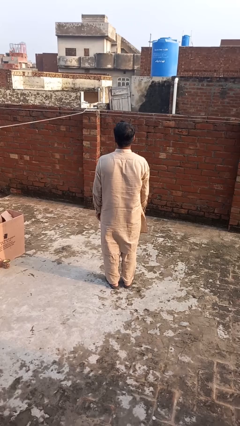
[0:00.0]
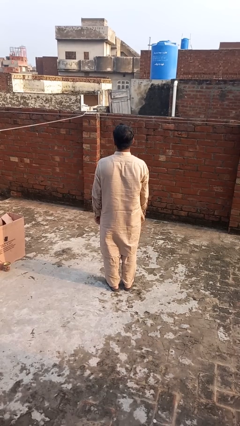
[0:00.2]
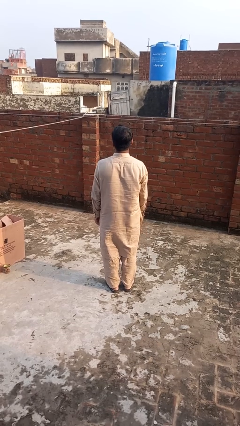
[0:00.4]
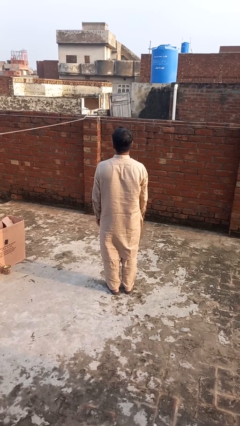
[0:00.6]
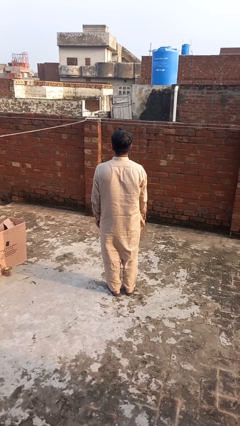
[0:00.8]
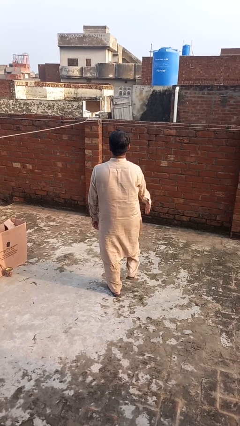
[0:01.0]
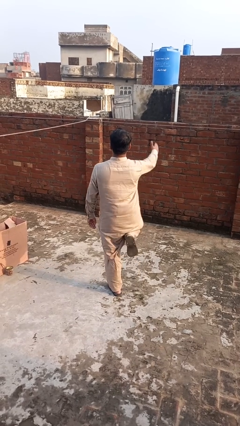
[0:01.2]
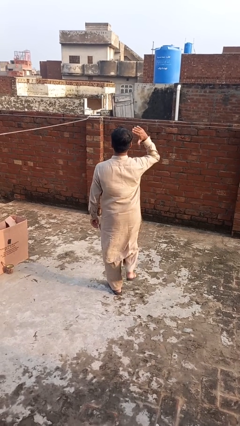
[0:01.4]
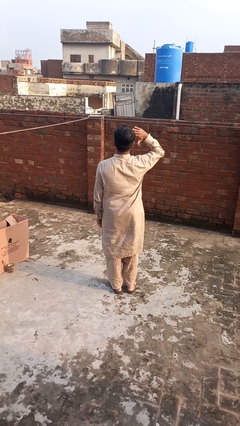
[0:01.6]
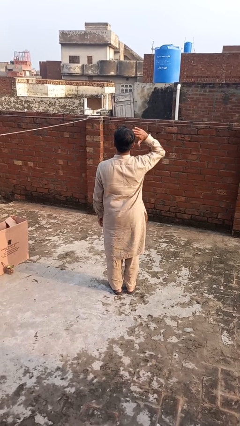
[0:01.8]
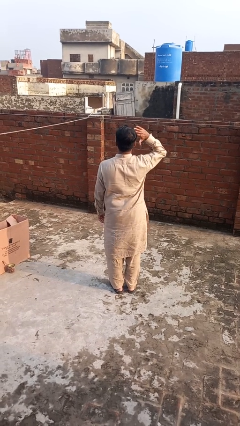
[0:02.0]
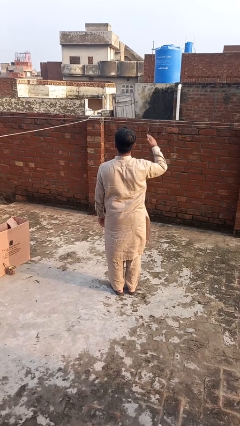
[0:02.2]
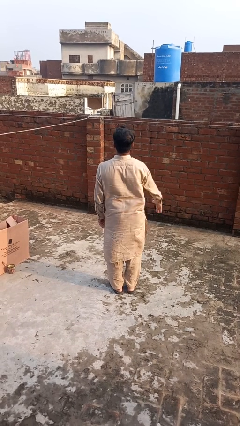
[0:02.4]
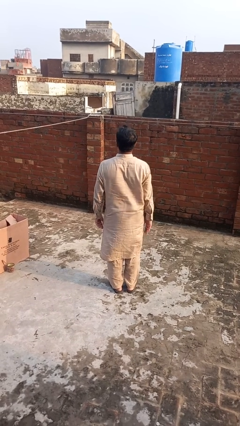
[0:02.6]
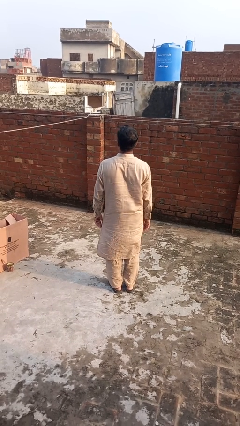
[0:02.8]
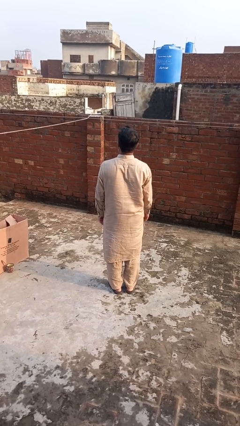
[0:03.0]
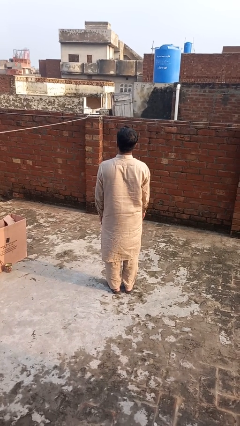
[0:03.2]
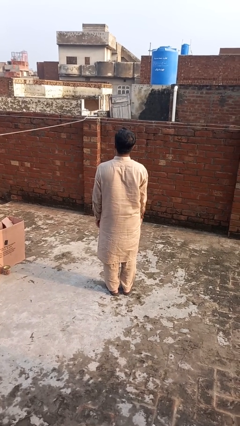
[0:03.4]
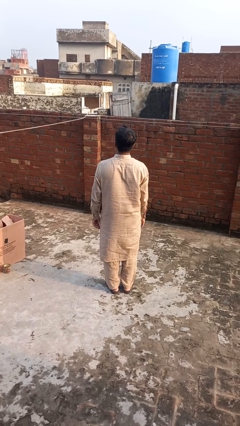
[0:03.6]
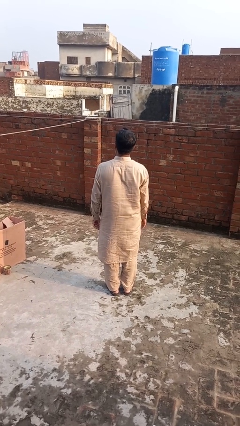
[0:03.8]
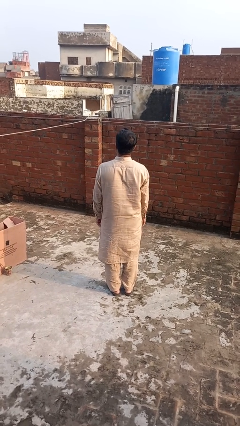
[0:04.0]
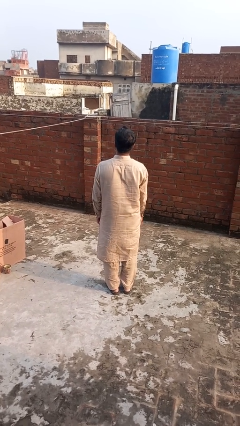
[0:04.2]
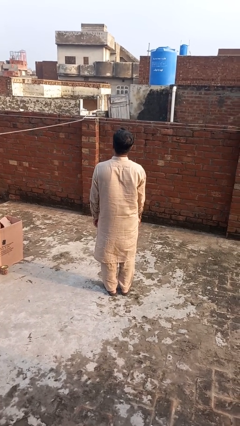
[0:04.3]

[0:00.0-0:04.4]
person salutes

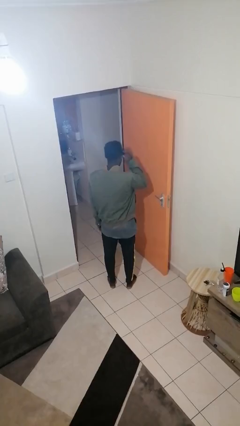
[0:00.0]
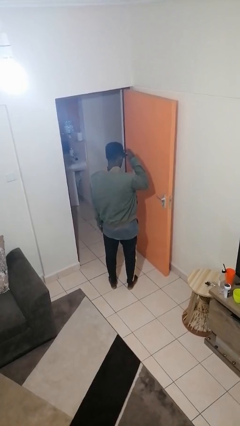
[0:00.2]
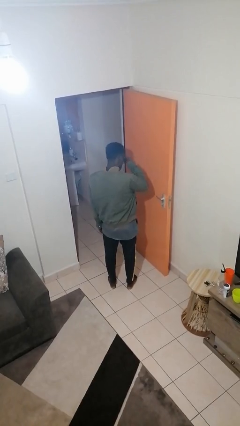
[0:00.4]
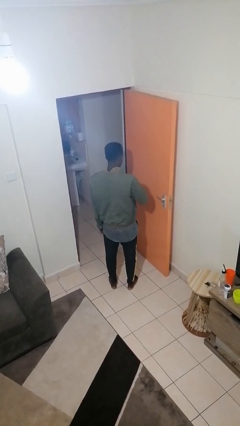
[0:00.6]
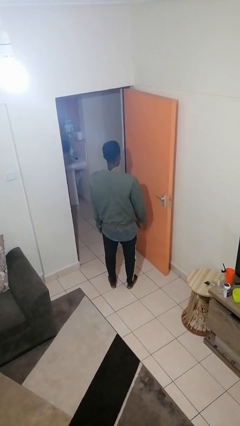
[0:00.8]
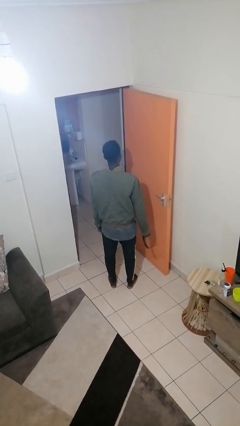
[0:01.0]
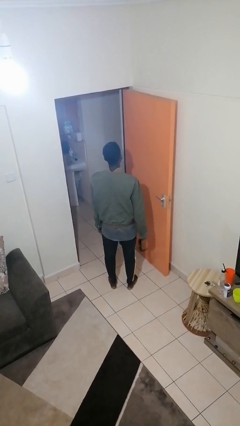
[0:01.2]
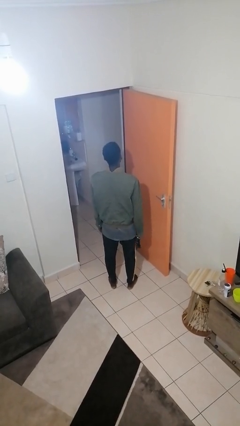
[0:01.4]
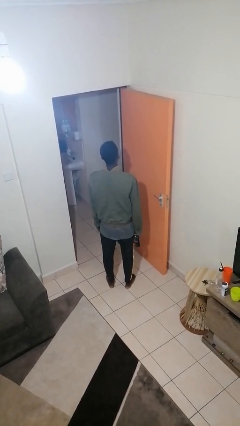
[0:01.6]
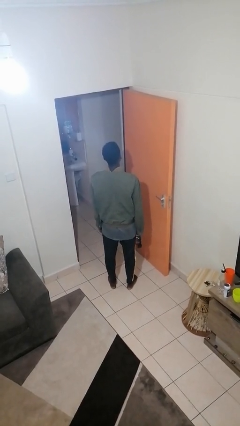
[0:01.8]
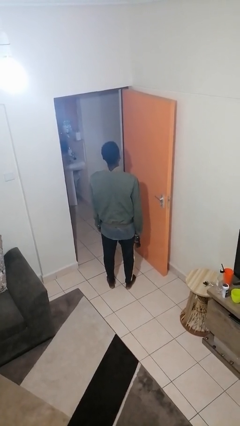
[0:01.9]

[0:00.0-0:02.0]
person takes off sunglasses

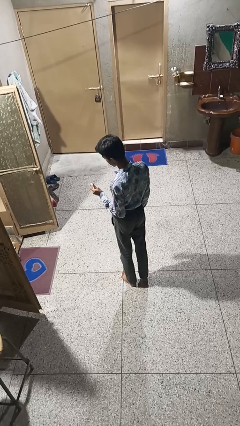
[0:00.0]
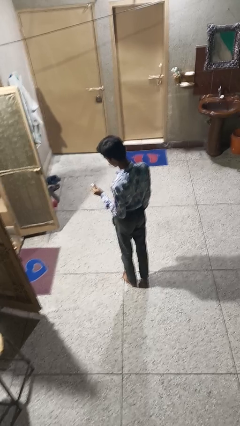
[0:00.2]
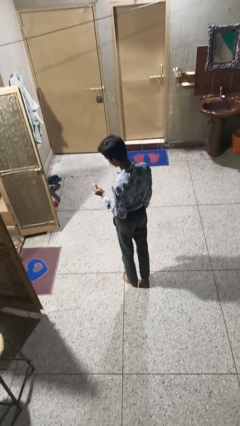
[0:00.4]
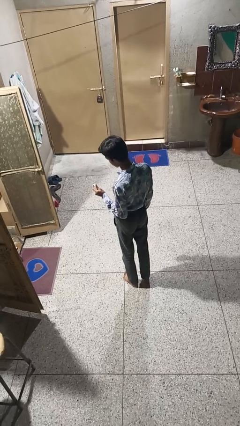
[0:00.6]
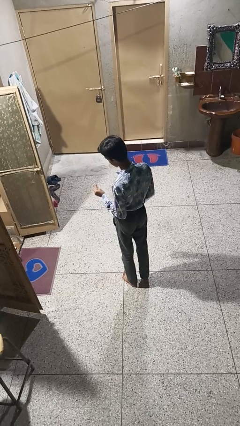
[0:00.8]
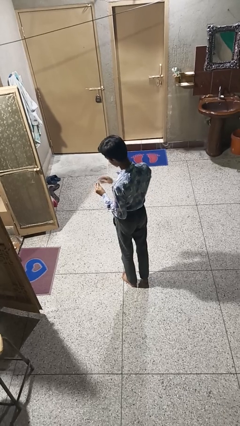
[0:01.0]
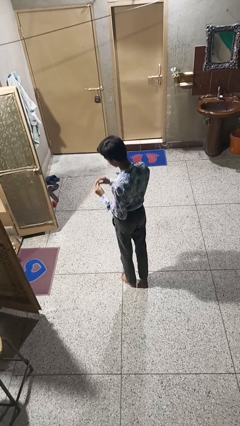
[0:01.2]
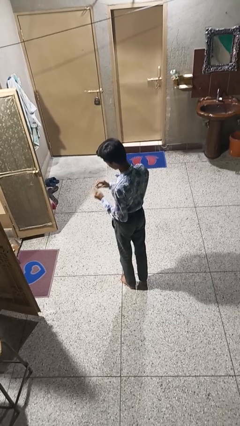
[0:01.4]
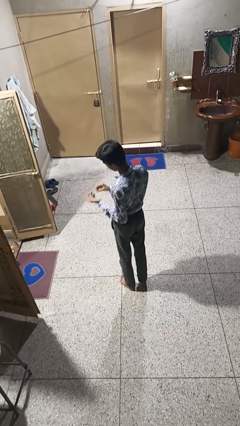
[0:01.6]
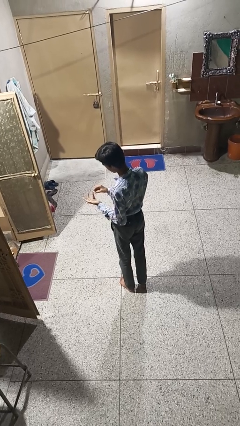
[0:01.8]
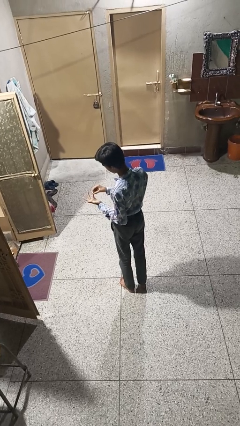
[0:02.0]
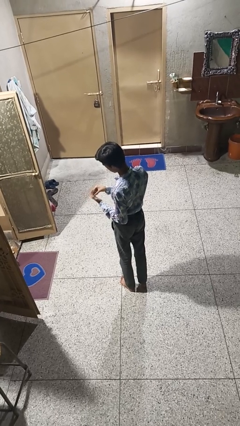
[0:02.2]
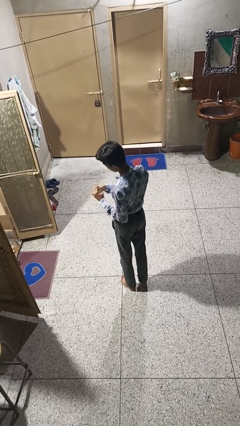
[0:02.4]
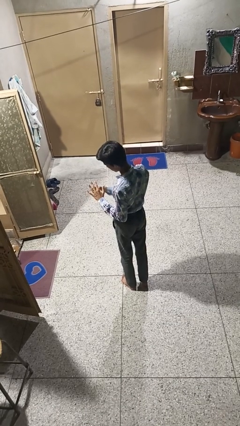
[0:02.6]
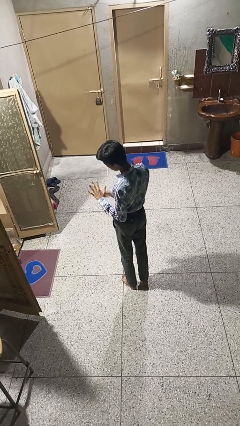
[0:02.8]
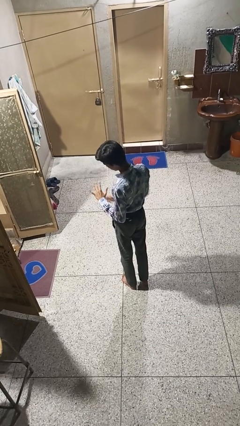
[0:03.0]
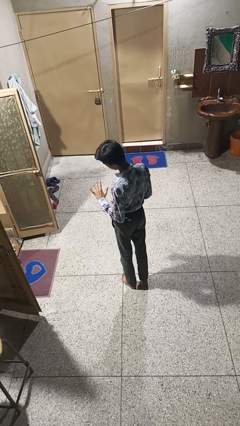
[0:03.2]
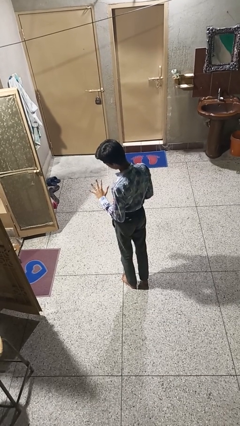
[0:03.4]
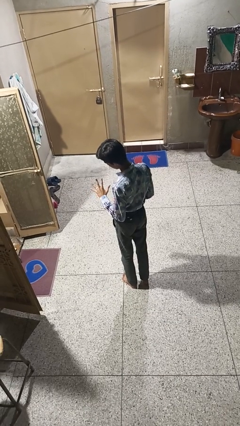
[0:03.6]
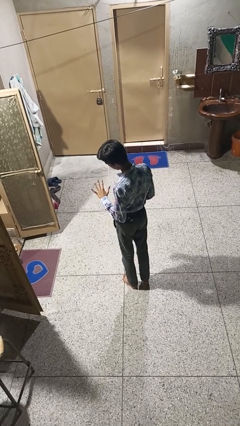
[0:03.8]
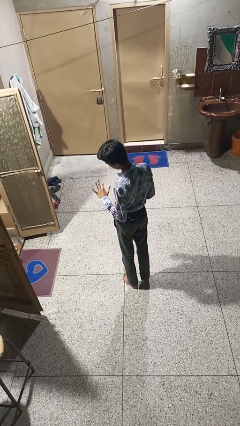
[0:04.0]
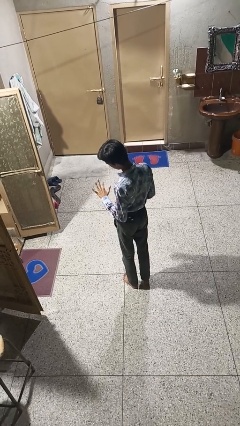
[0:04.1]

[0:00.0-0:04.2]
person puts on ring

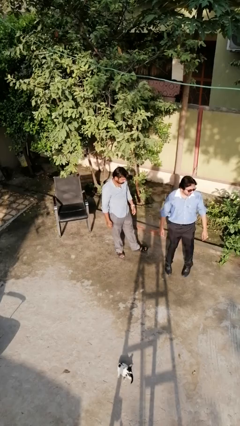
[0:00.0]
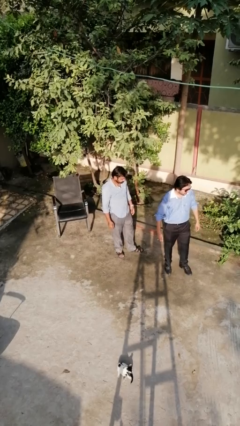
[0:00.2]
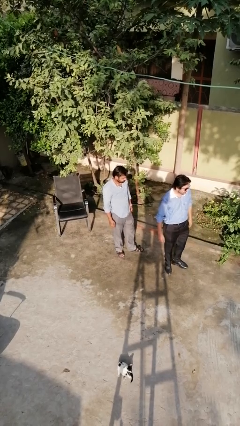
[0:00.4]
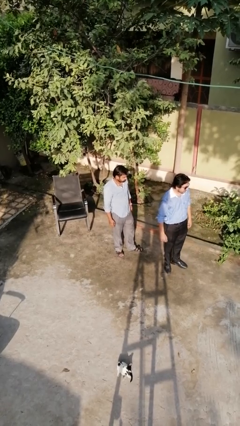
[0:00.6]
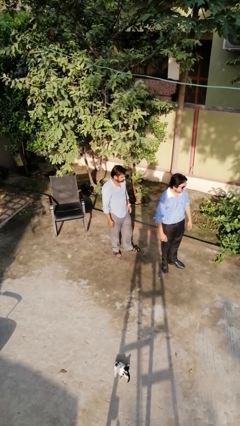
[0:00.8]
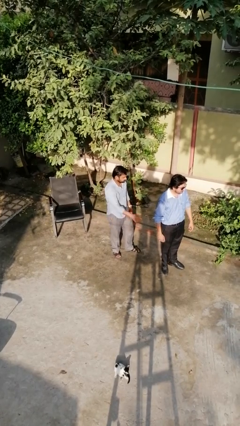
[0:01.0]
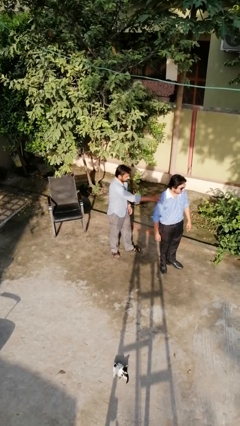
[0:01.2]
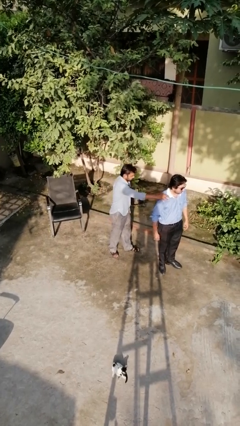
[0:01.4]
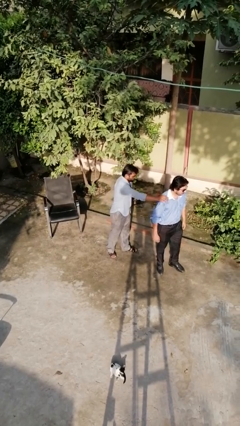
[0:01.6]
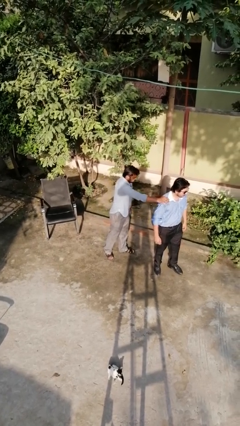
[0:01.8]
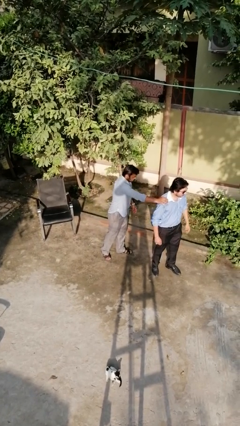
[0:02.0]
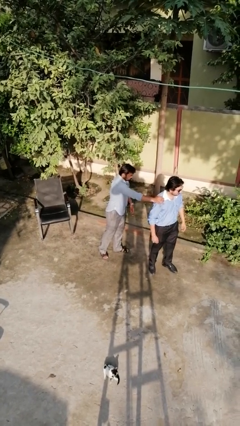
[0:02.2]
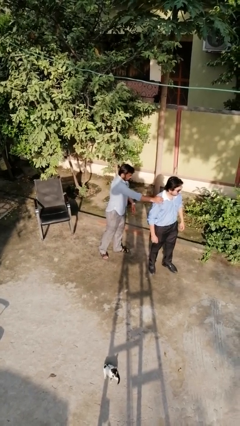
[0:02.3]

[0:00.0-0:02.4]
person grabs person by shoulder

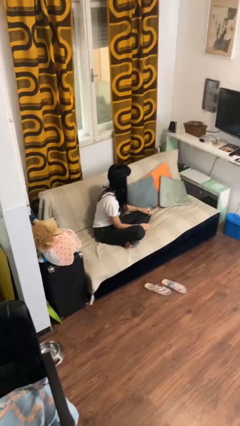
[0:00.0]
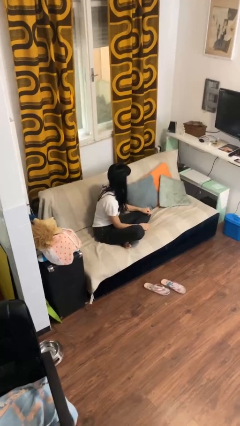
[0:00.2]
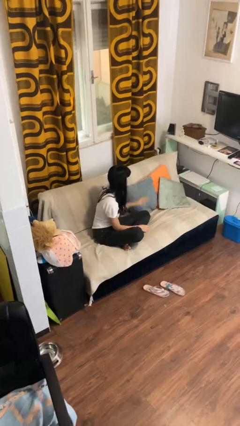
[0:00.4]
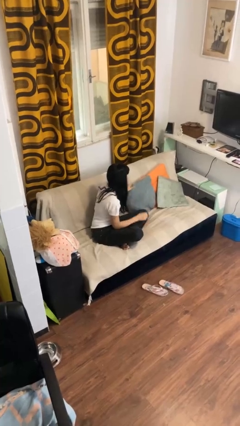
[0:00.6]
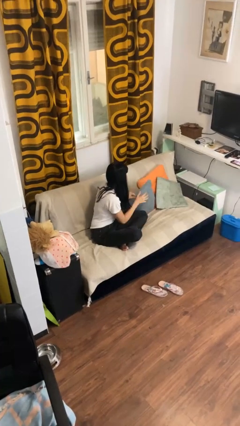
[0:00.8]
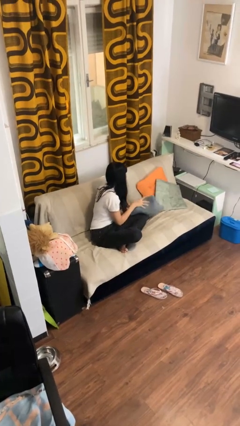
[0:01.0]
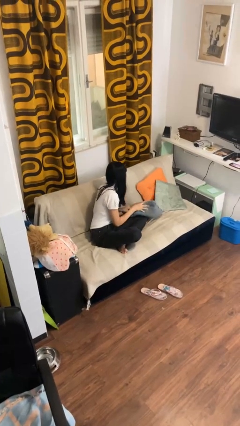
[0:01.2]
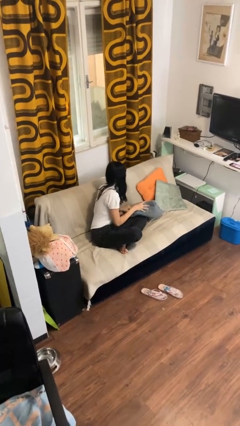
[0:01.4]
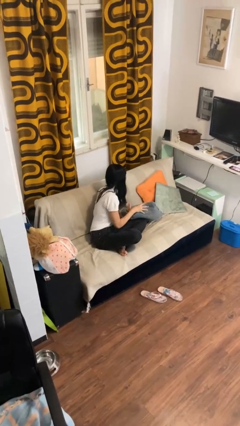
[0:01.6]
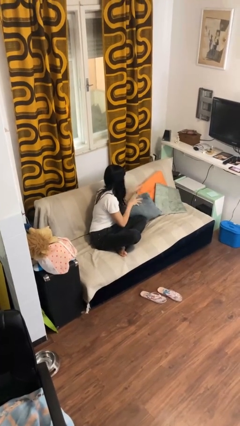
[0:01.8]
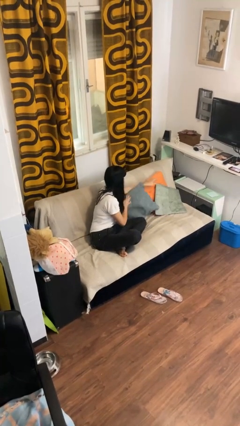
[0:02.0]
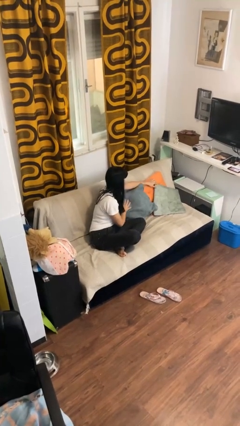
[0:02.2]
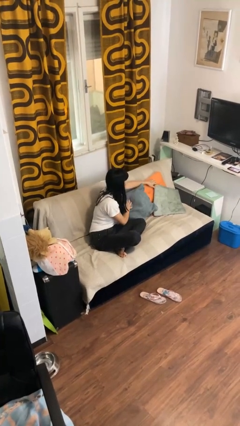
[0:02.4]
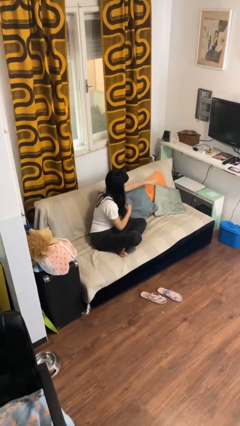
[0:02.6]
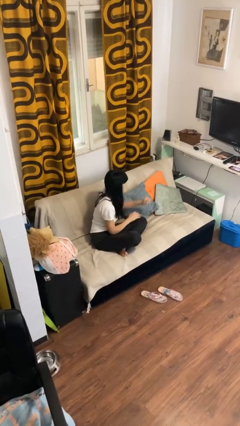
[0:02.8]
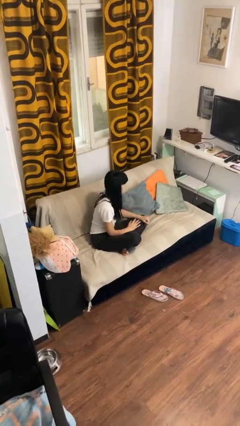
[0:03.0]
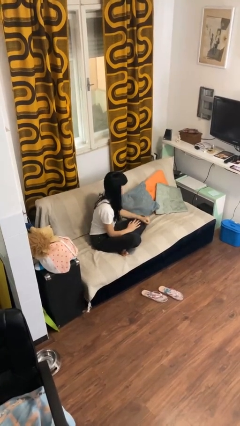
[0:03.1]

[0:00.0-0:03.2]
person searches in couch

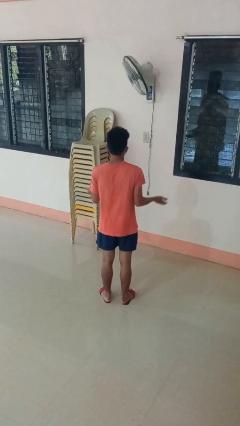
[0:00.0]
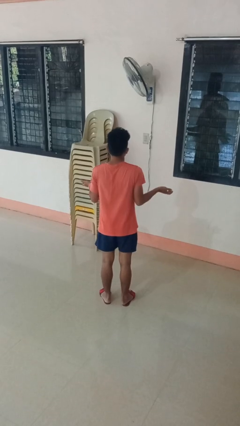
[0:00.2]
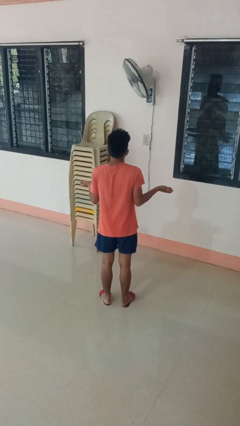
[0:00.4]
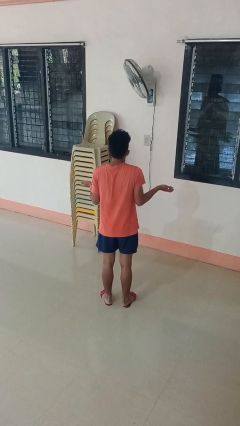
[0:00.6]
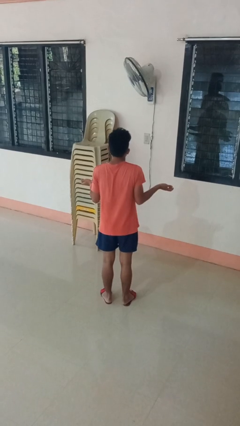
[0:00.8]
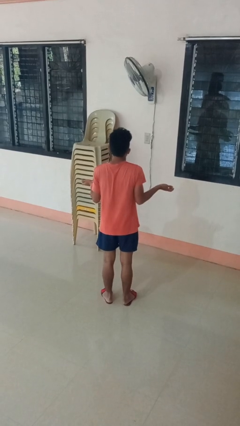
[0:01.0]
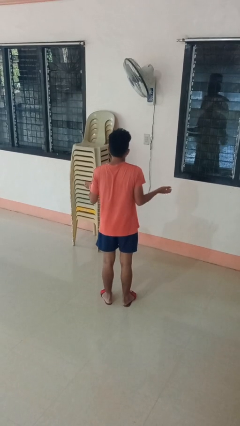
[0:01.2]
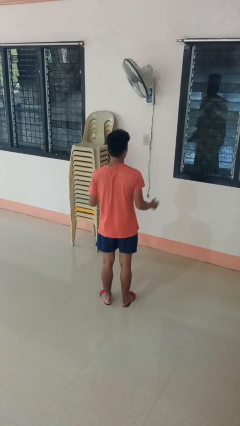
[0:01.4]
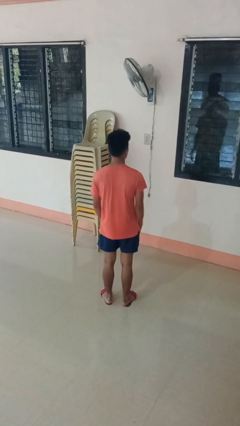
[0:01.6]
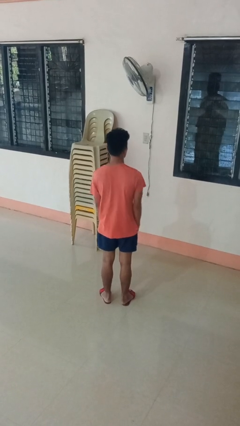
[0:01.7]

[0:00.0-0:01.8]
person shrugs
